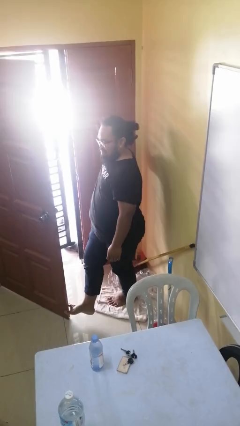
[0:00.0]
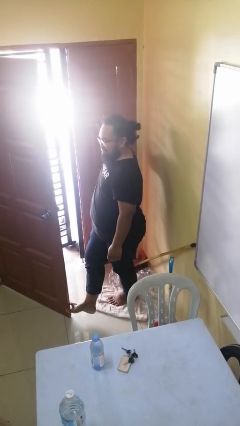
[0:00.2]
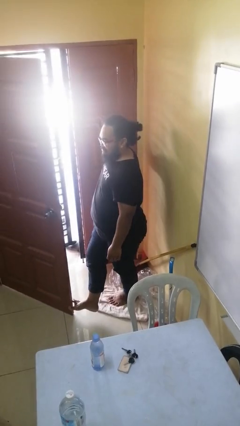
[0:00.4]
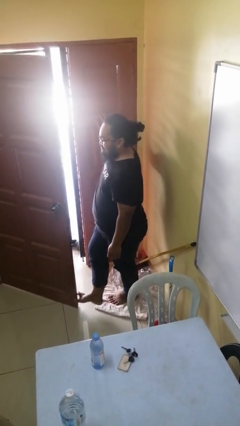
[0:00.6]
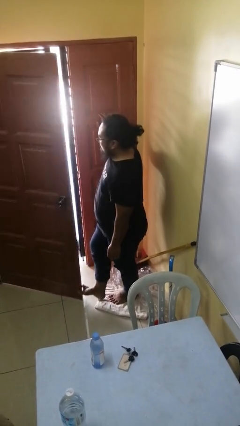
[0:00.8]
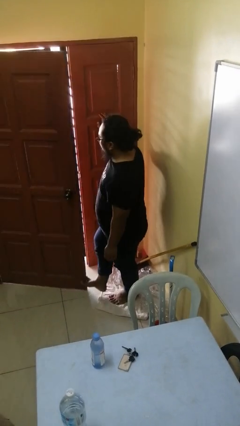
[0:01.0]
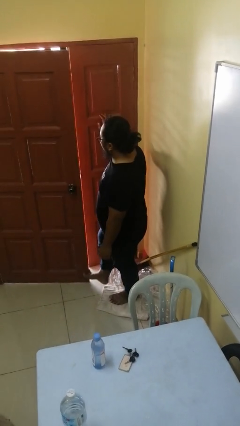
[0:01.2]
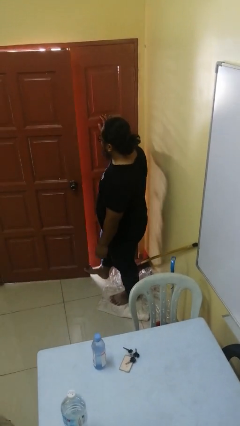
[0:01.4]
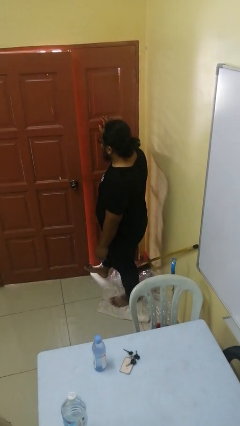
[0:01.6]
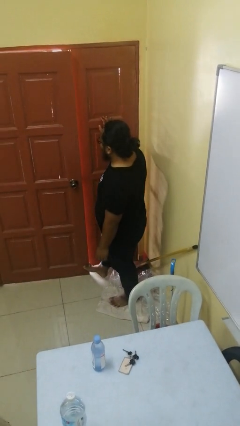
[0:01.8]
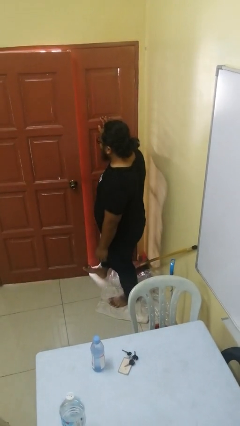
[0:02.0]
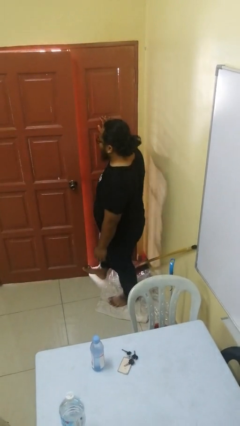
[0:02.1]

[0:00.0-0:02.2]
person closes door with foot

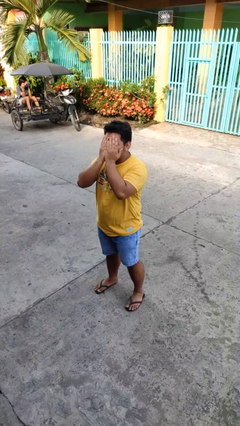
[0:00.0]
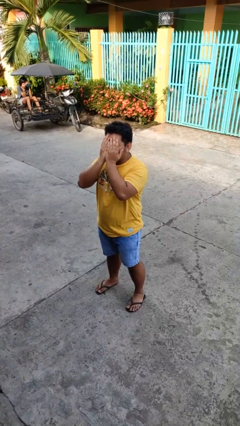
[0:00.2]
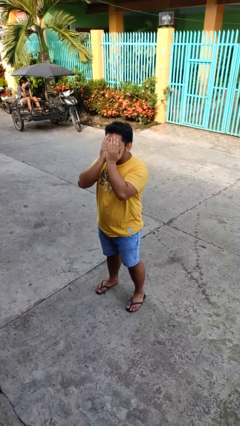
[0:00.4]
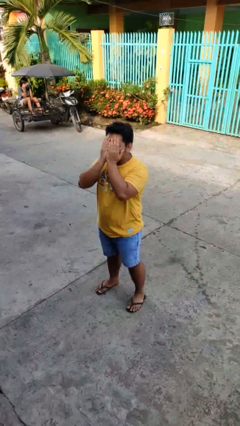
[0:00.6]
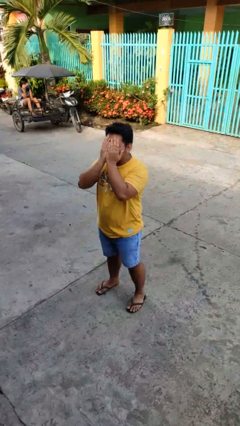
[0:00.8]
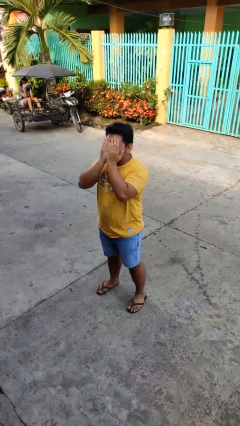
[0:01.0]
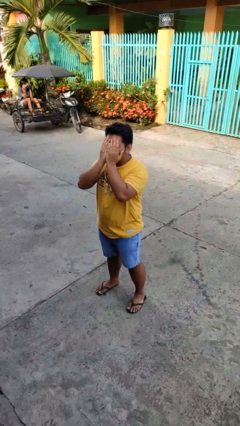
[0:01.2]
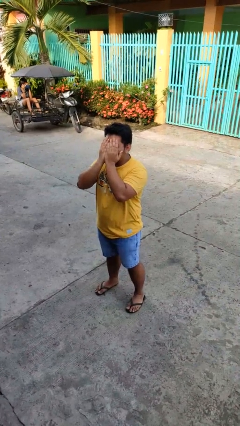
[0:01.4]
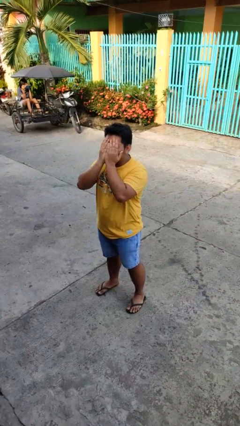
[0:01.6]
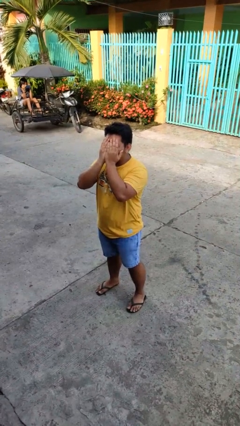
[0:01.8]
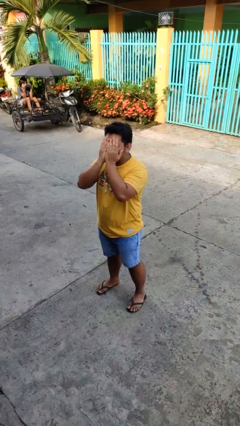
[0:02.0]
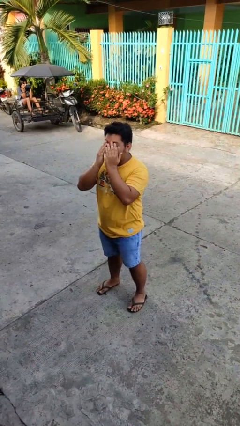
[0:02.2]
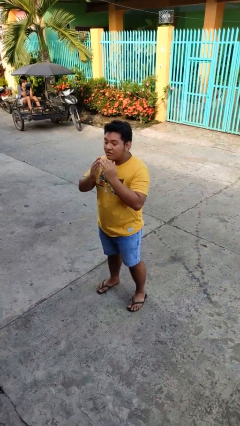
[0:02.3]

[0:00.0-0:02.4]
person covers face with hands

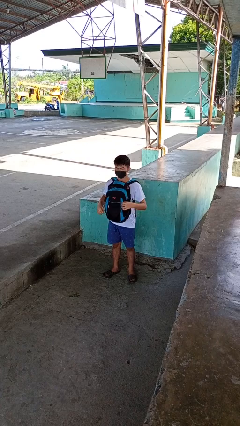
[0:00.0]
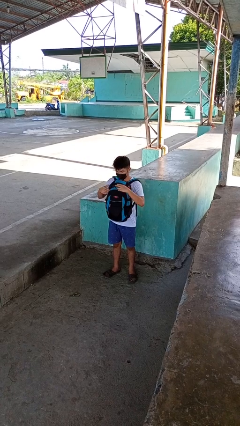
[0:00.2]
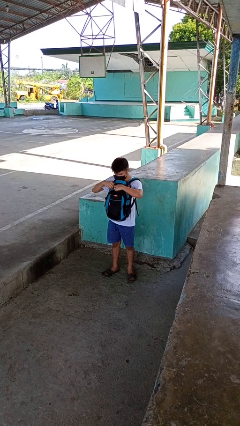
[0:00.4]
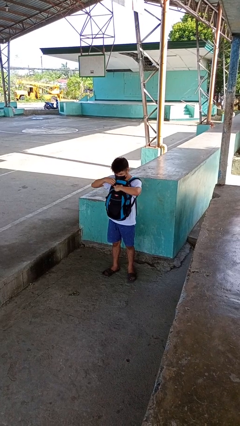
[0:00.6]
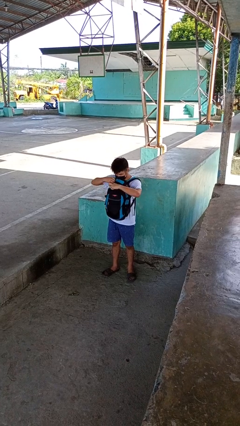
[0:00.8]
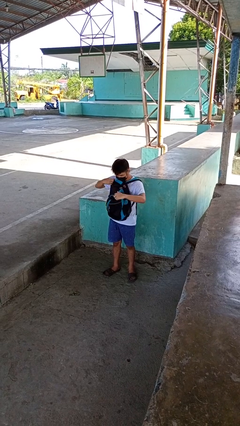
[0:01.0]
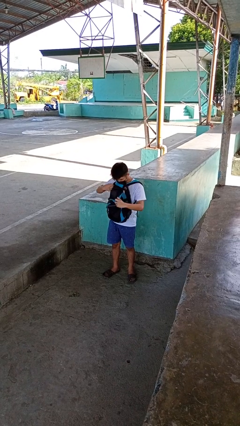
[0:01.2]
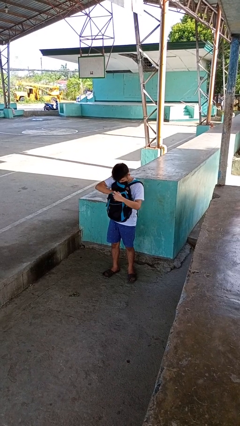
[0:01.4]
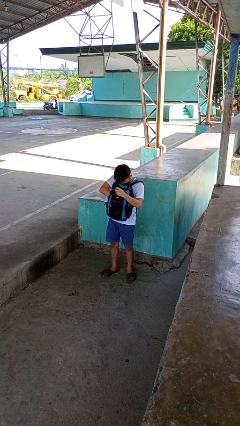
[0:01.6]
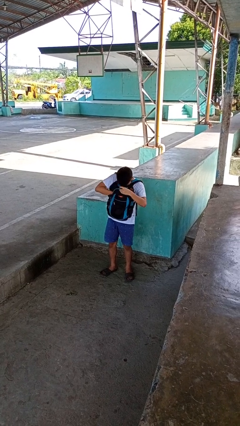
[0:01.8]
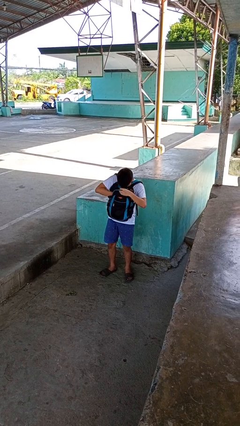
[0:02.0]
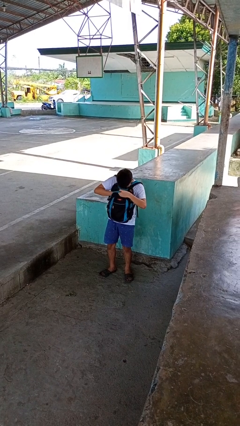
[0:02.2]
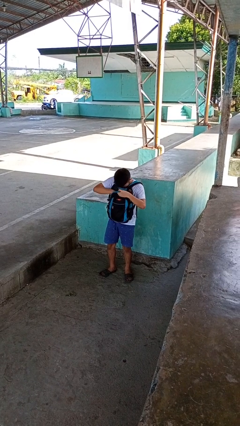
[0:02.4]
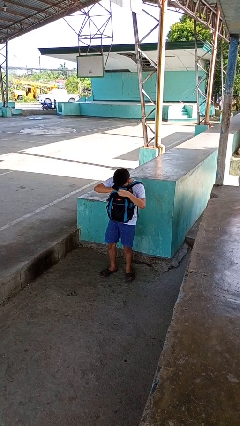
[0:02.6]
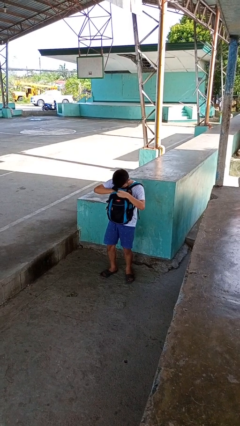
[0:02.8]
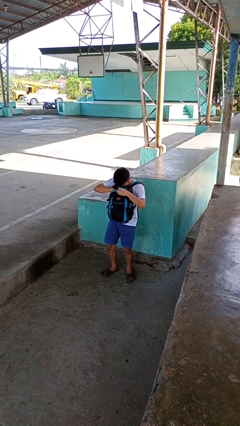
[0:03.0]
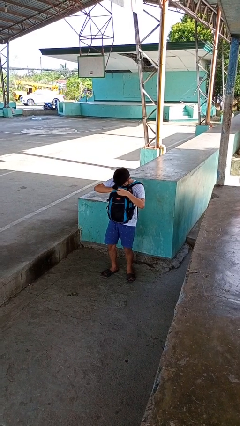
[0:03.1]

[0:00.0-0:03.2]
person searches in backpack

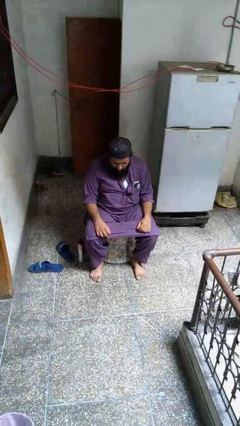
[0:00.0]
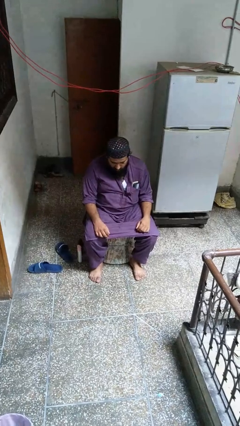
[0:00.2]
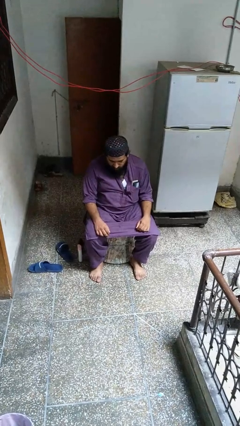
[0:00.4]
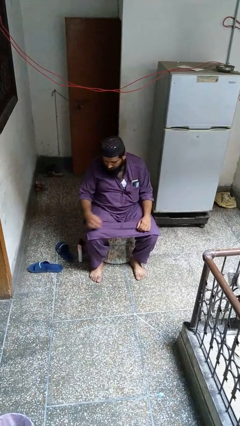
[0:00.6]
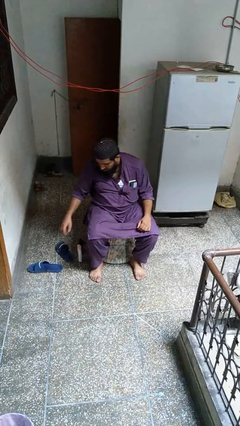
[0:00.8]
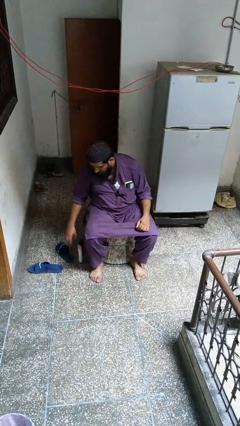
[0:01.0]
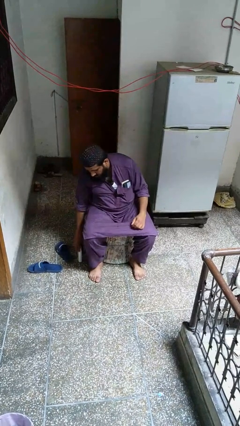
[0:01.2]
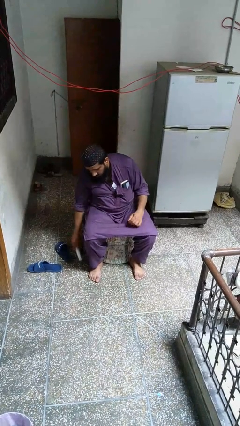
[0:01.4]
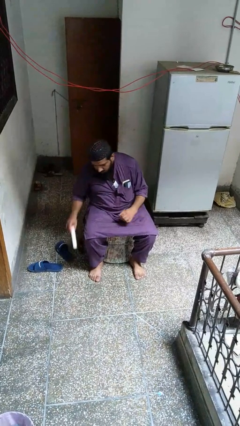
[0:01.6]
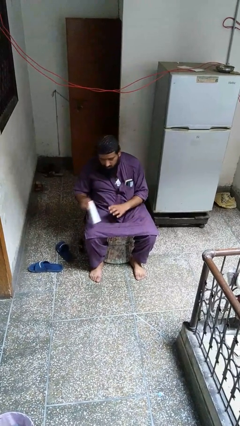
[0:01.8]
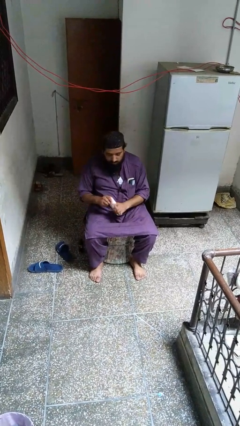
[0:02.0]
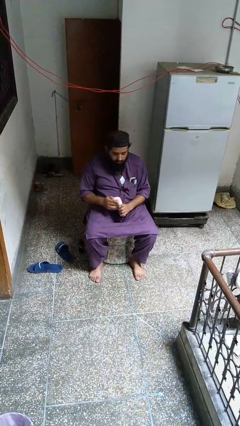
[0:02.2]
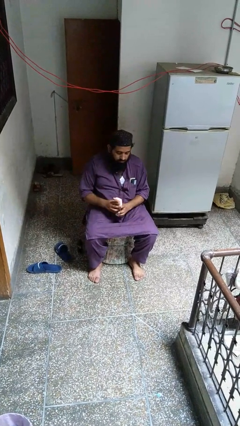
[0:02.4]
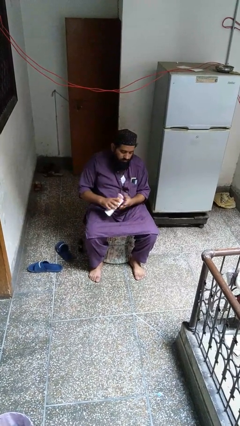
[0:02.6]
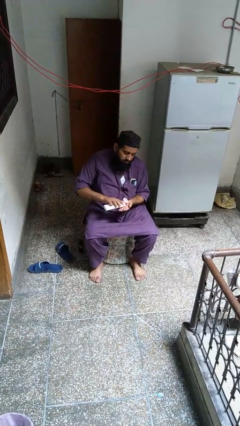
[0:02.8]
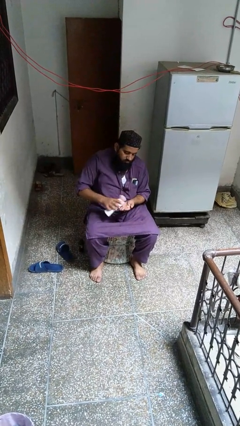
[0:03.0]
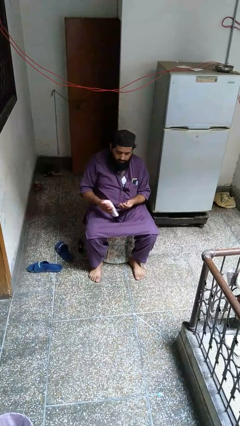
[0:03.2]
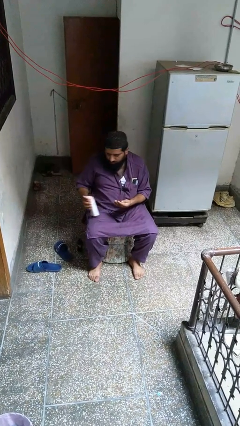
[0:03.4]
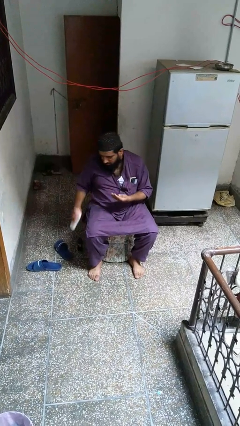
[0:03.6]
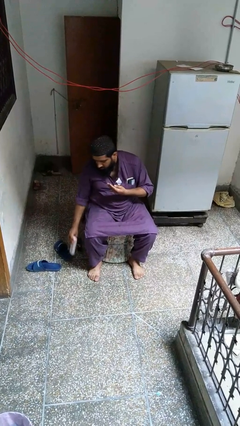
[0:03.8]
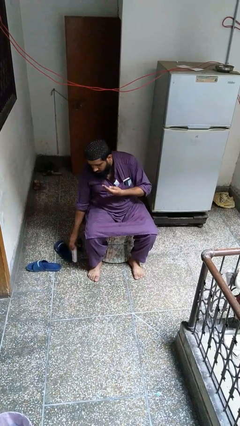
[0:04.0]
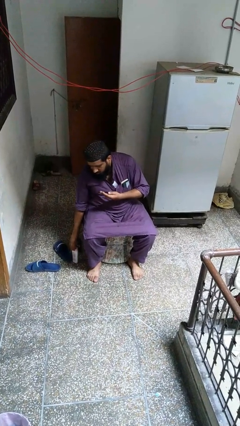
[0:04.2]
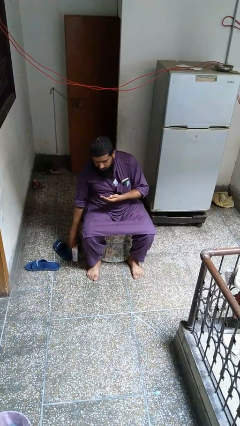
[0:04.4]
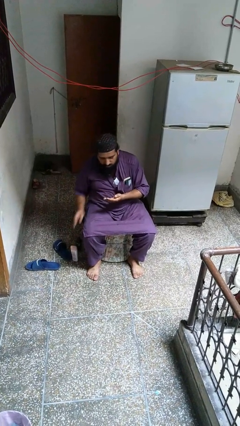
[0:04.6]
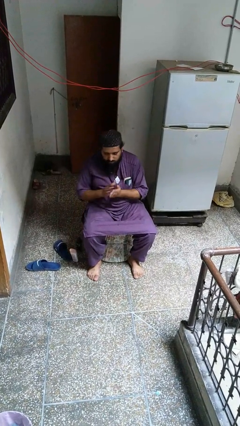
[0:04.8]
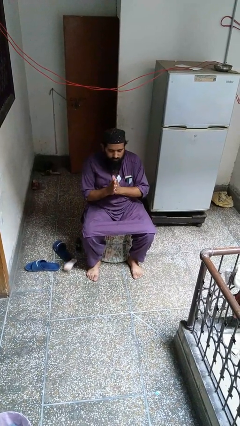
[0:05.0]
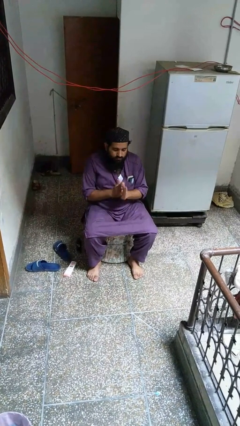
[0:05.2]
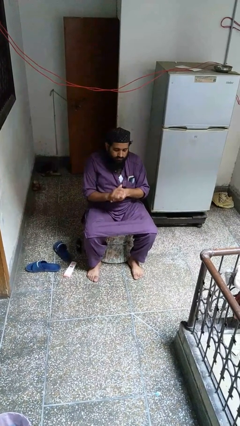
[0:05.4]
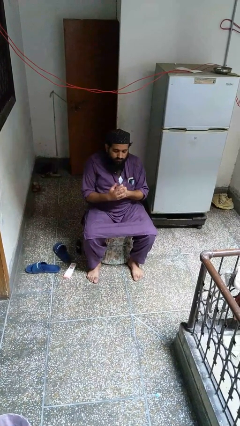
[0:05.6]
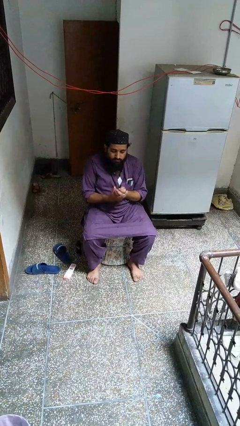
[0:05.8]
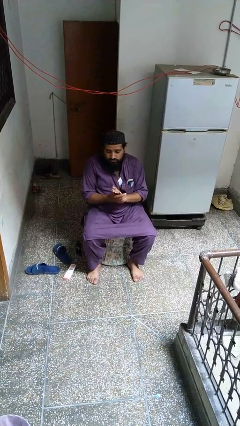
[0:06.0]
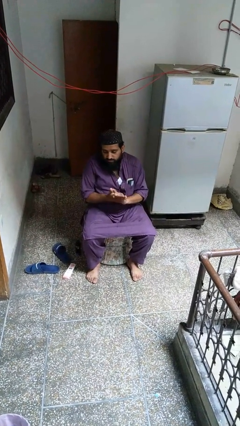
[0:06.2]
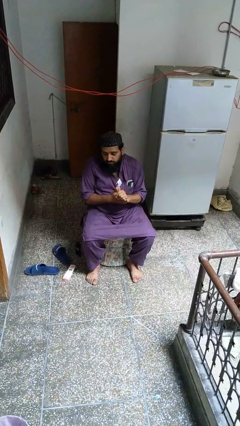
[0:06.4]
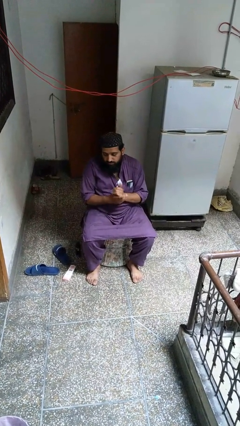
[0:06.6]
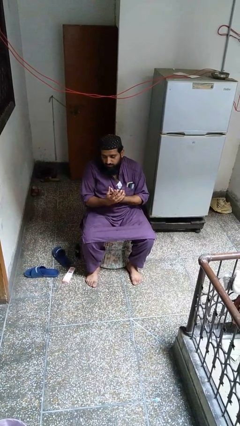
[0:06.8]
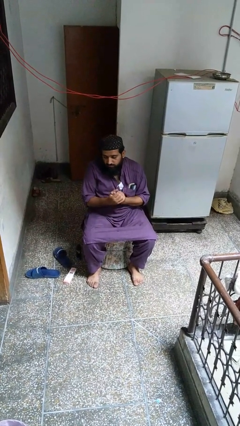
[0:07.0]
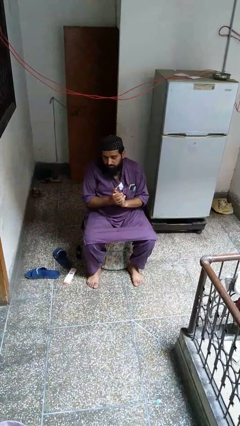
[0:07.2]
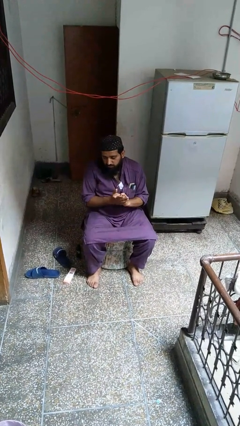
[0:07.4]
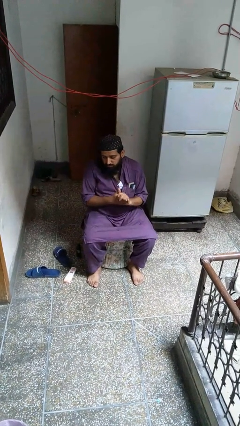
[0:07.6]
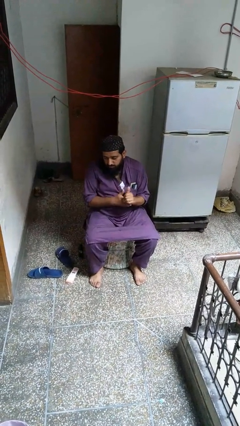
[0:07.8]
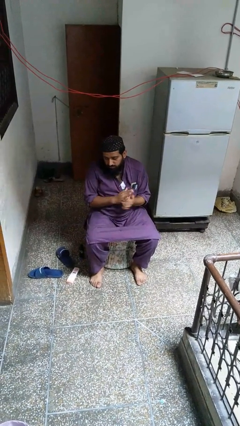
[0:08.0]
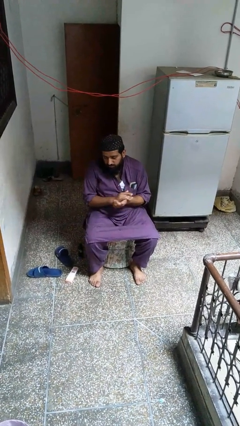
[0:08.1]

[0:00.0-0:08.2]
person applies facial moisturizer

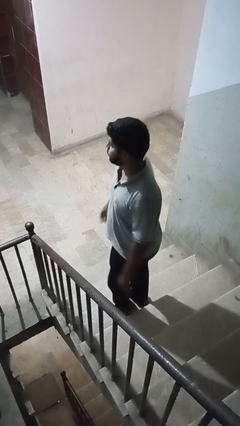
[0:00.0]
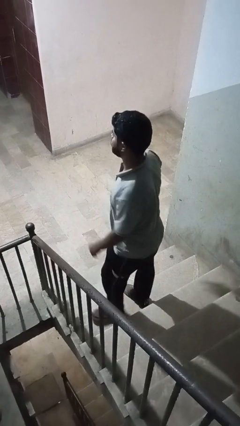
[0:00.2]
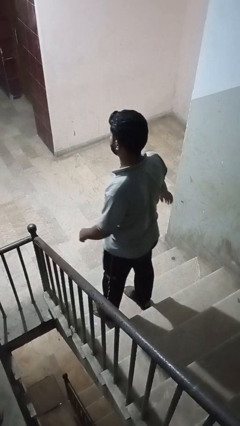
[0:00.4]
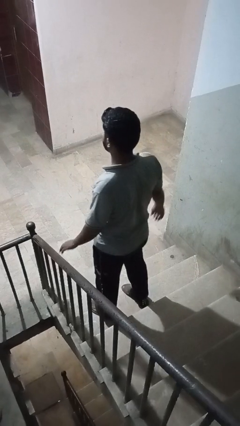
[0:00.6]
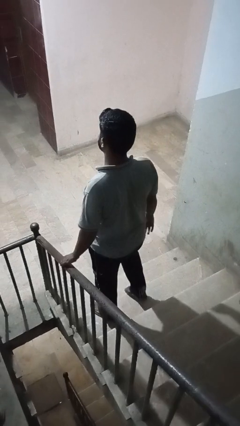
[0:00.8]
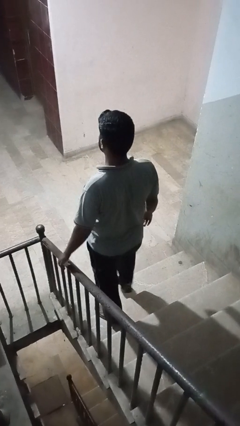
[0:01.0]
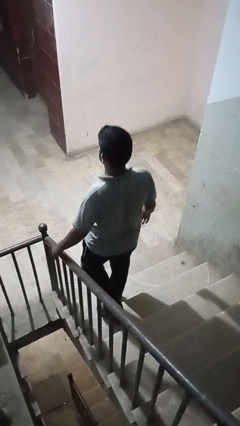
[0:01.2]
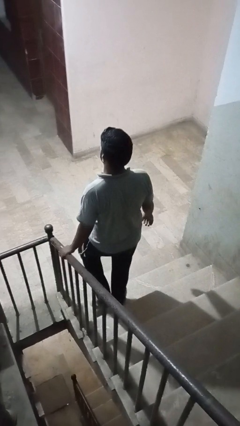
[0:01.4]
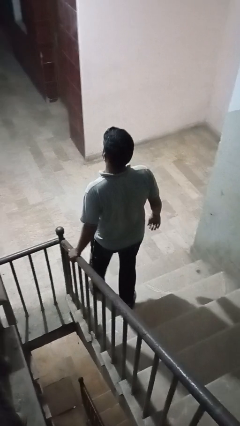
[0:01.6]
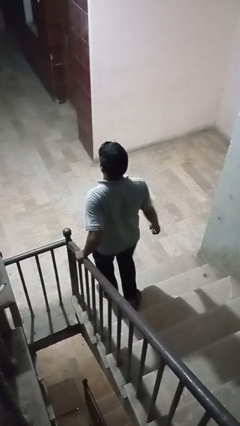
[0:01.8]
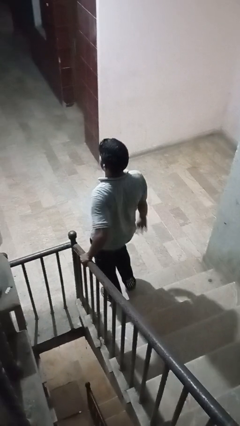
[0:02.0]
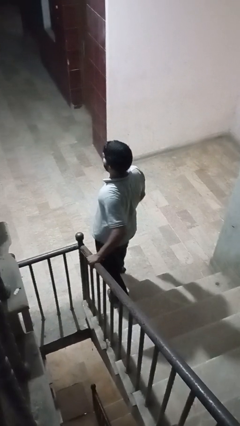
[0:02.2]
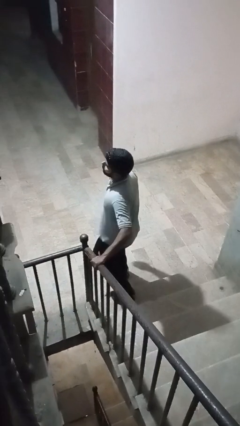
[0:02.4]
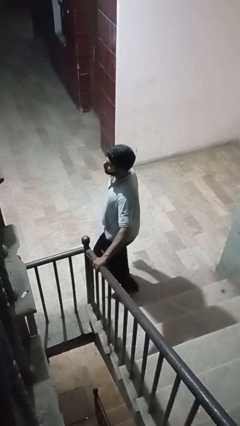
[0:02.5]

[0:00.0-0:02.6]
person climbs down stairs
